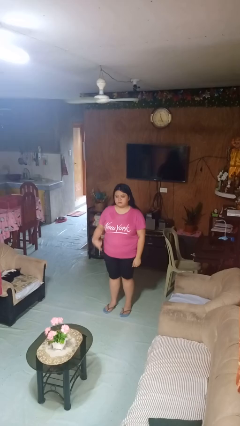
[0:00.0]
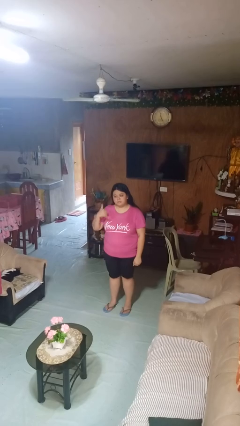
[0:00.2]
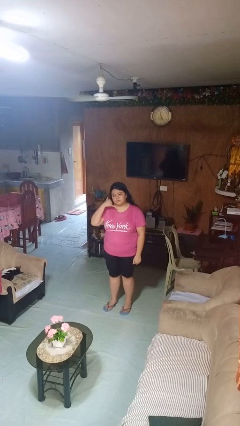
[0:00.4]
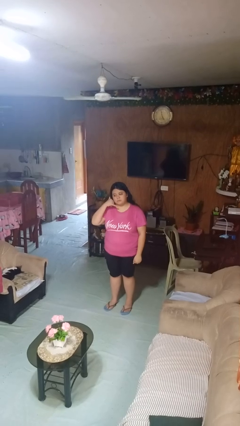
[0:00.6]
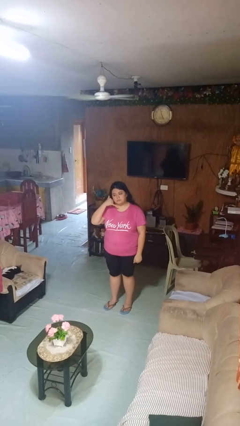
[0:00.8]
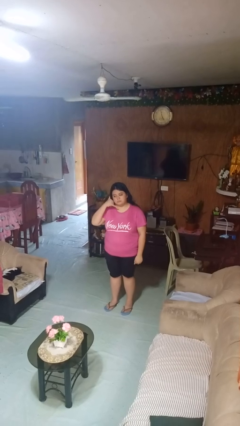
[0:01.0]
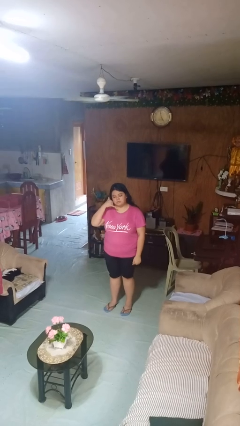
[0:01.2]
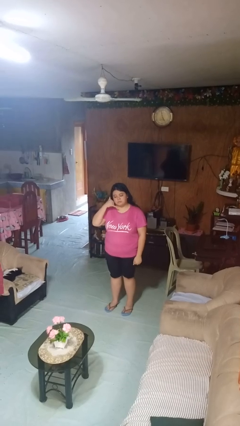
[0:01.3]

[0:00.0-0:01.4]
person gestures call me

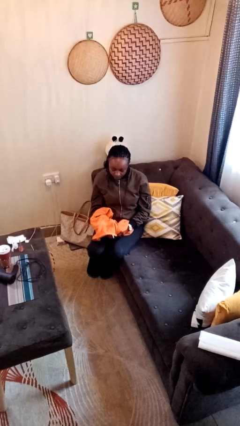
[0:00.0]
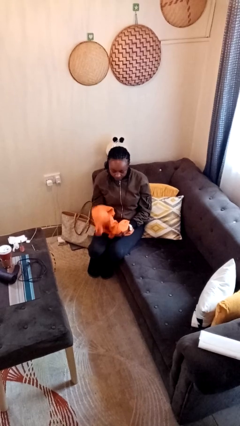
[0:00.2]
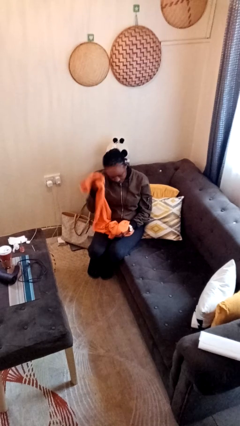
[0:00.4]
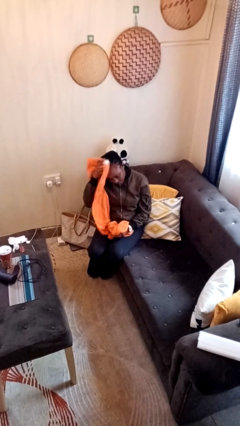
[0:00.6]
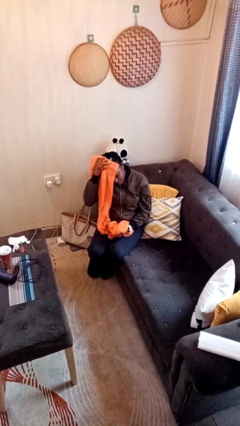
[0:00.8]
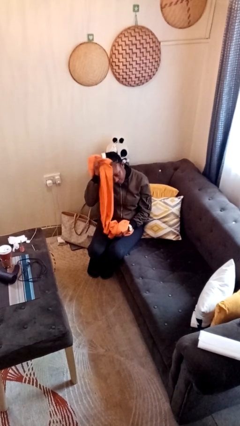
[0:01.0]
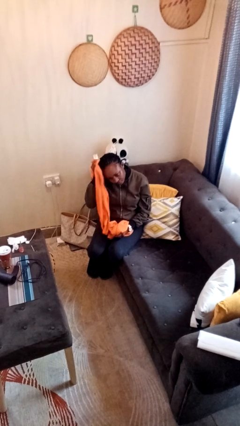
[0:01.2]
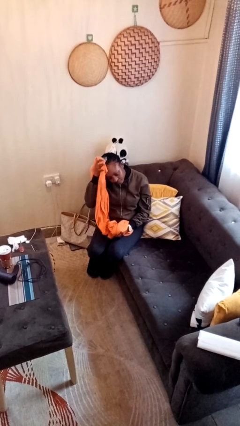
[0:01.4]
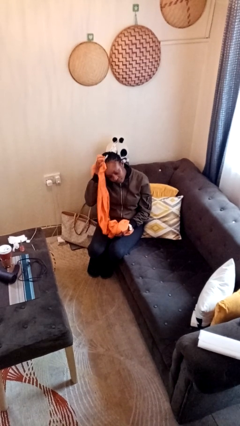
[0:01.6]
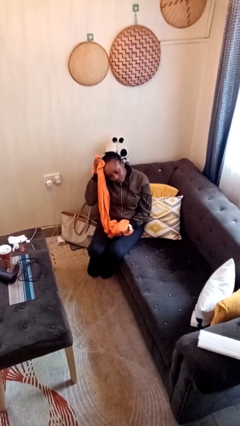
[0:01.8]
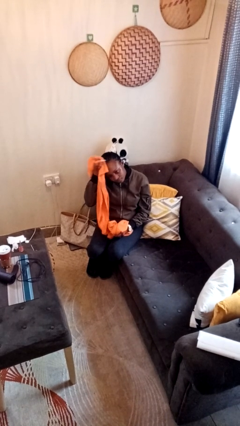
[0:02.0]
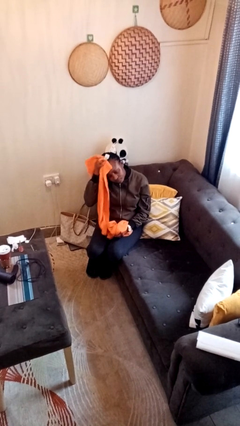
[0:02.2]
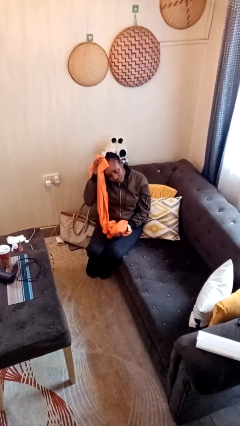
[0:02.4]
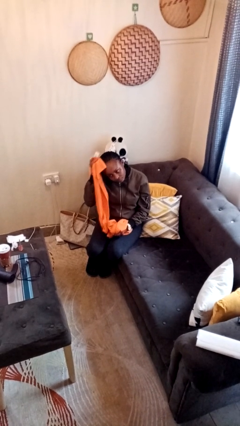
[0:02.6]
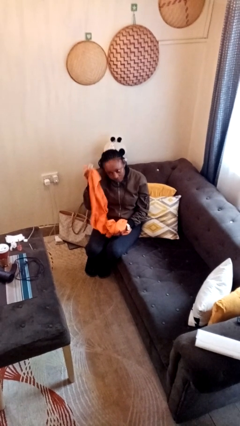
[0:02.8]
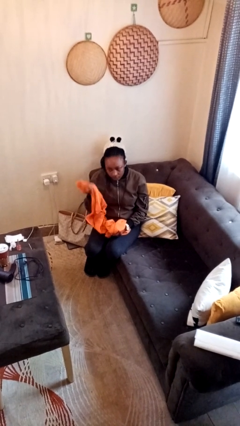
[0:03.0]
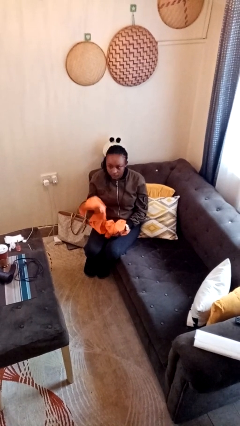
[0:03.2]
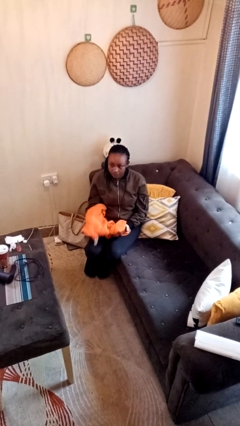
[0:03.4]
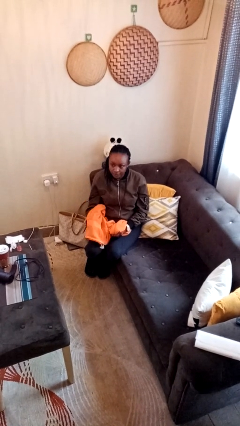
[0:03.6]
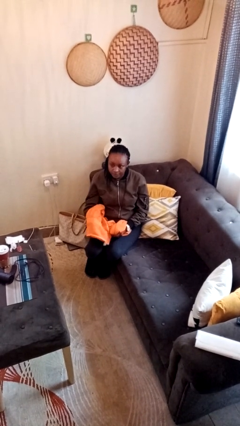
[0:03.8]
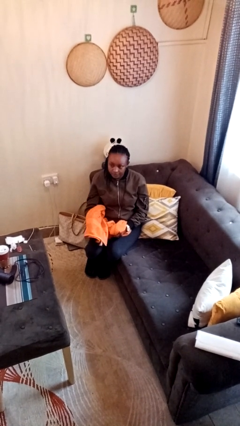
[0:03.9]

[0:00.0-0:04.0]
person dries hair with towel

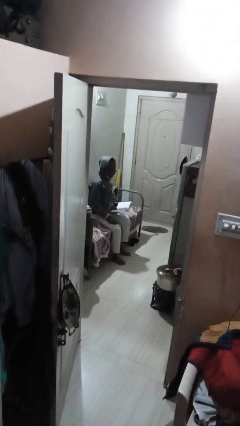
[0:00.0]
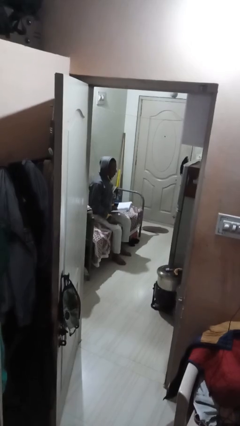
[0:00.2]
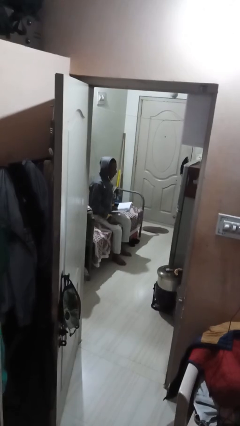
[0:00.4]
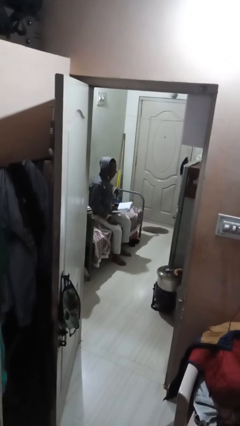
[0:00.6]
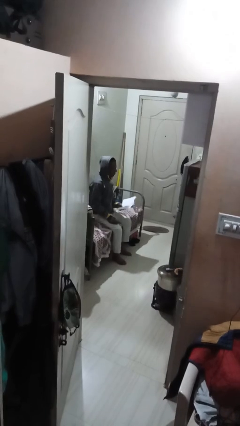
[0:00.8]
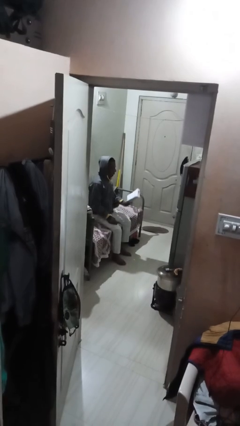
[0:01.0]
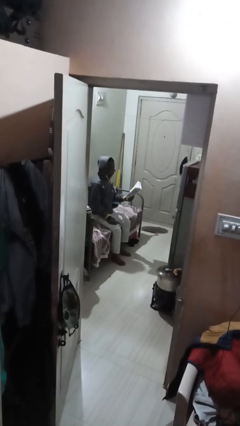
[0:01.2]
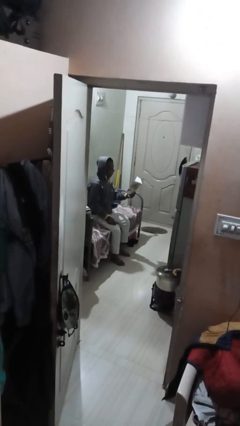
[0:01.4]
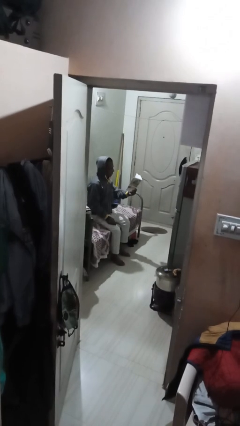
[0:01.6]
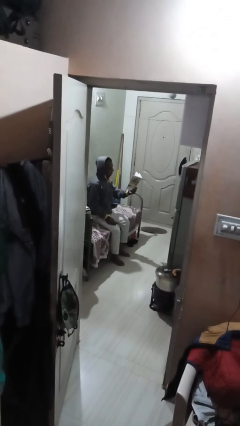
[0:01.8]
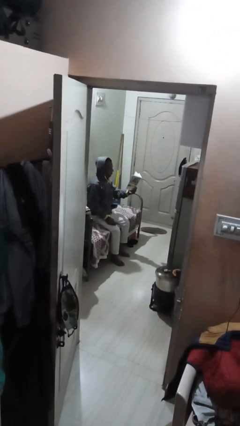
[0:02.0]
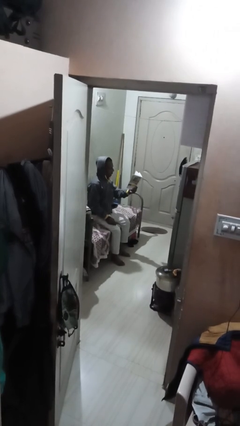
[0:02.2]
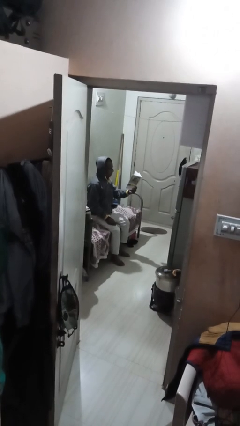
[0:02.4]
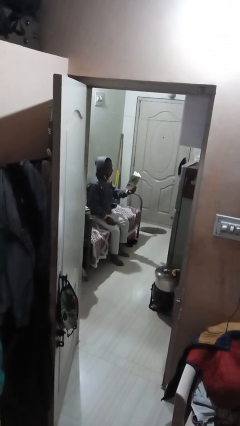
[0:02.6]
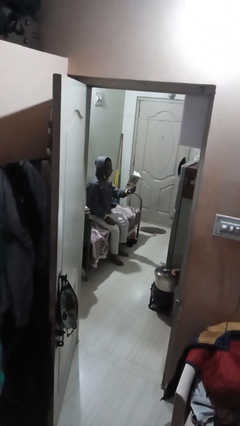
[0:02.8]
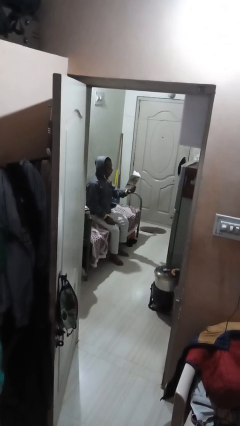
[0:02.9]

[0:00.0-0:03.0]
person reads document

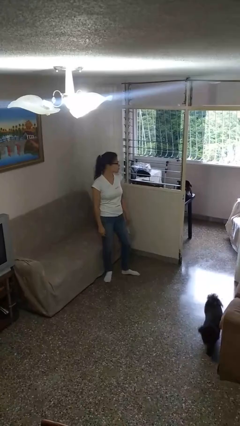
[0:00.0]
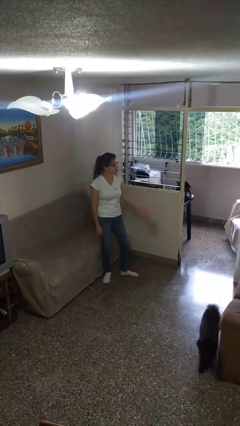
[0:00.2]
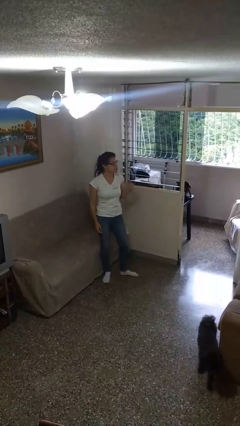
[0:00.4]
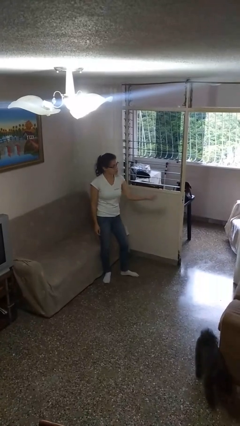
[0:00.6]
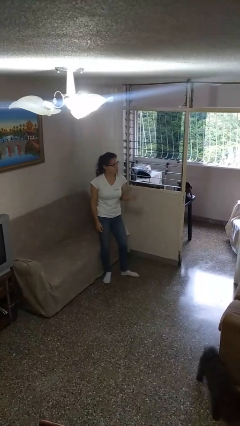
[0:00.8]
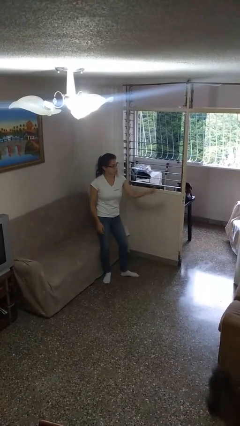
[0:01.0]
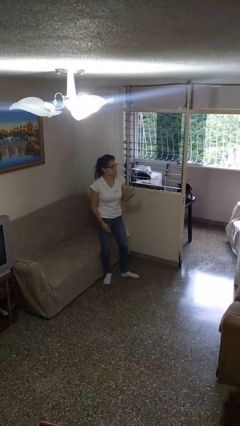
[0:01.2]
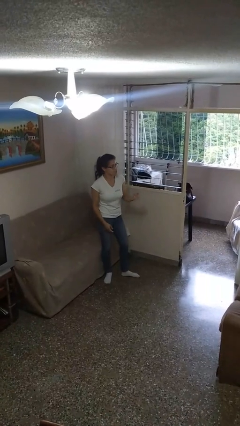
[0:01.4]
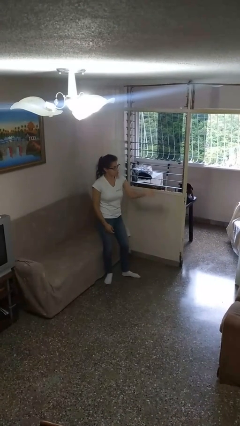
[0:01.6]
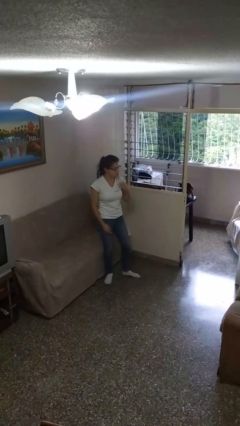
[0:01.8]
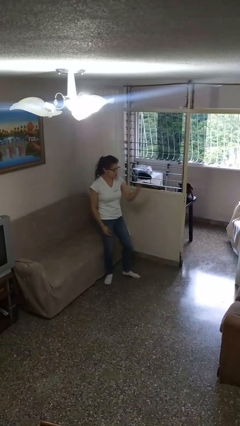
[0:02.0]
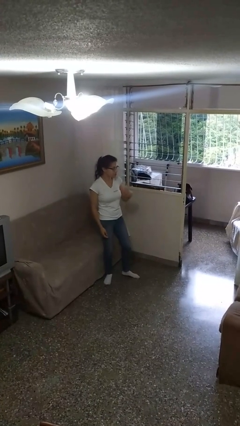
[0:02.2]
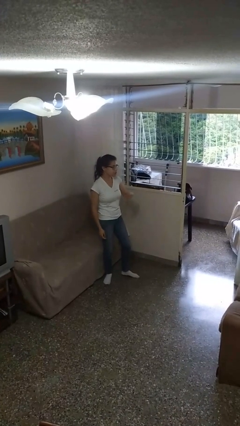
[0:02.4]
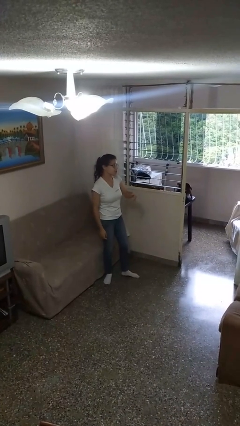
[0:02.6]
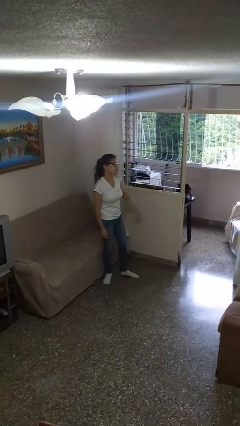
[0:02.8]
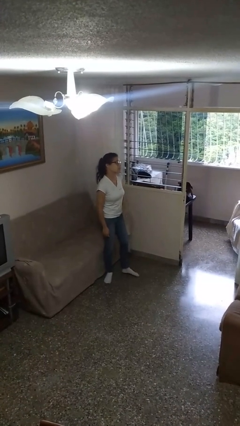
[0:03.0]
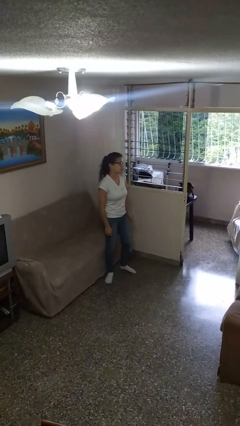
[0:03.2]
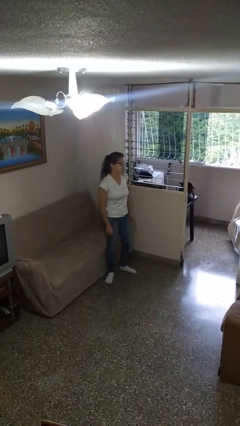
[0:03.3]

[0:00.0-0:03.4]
person gestures come here

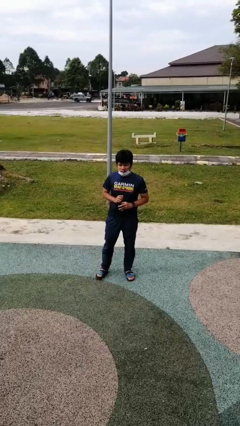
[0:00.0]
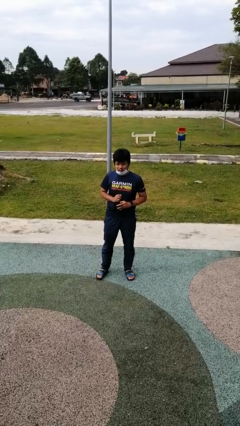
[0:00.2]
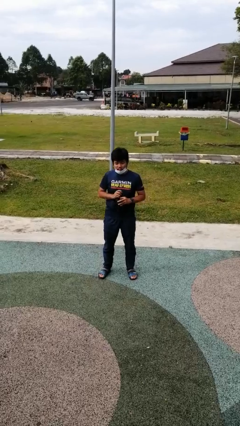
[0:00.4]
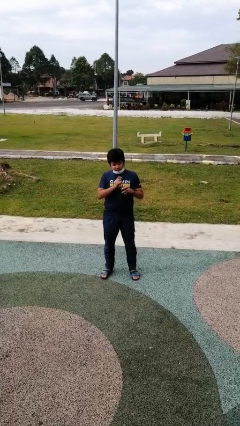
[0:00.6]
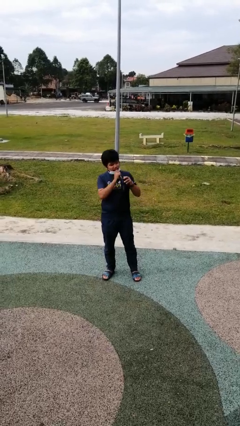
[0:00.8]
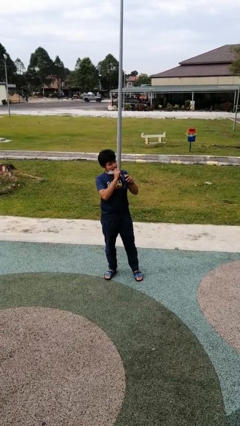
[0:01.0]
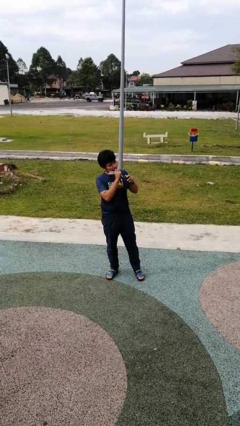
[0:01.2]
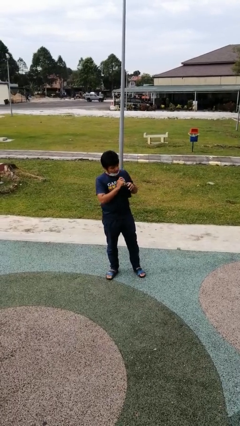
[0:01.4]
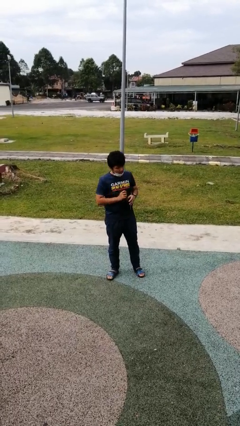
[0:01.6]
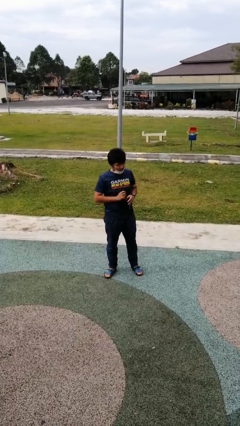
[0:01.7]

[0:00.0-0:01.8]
person drinks from straw

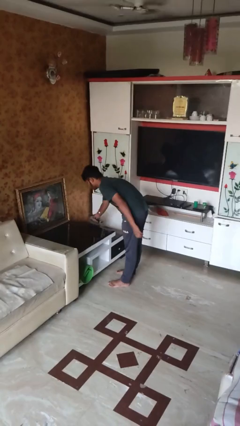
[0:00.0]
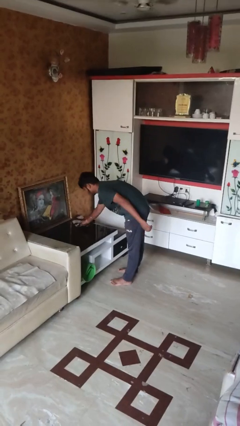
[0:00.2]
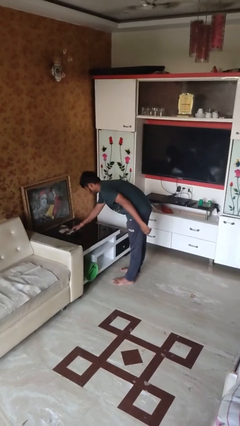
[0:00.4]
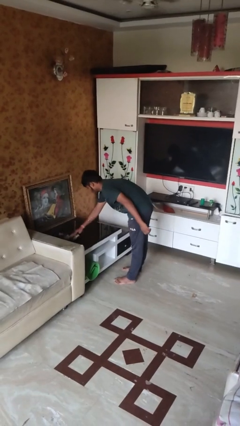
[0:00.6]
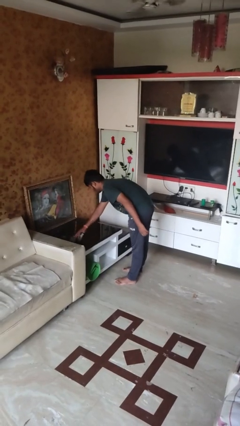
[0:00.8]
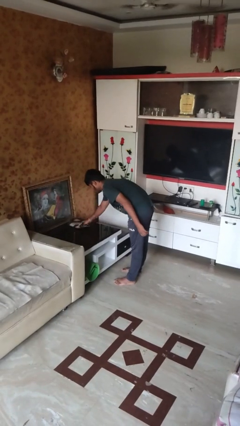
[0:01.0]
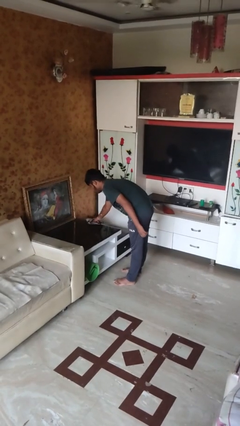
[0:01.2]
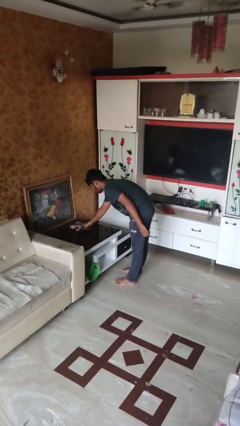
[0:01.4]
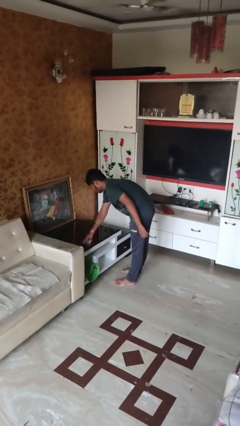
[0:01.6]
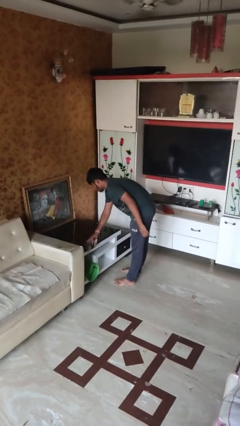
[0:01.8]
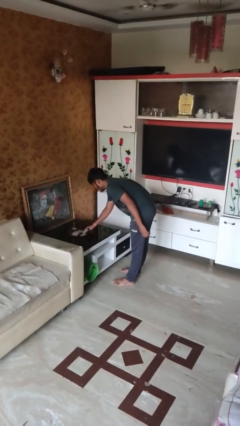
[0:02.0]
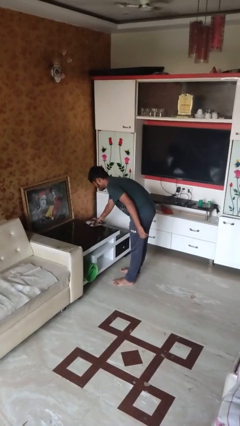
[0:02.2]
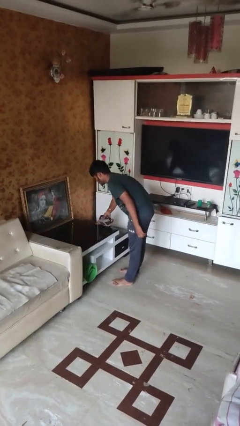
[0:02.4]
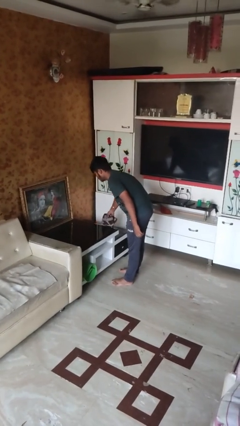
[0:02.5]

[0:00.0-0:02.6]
person cleans table with rag

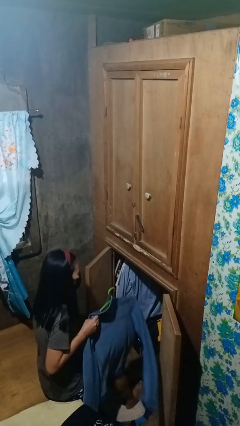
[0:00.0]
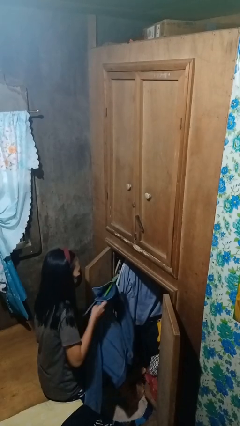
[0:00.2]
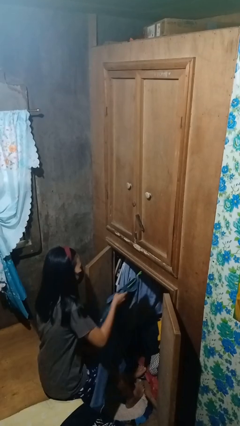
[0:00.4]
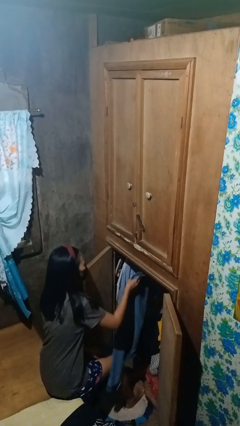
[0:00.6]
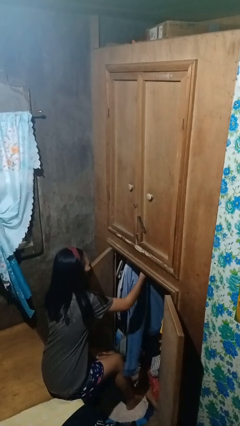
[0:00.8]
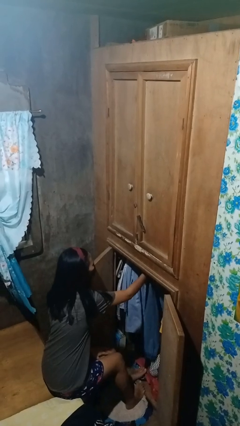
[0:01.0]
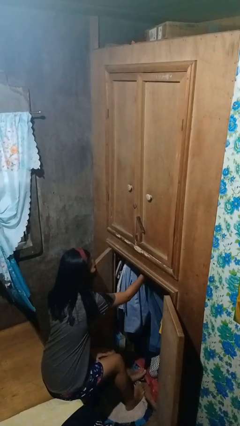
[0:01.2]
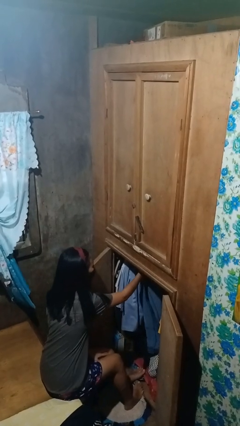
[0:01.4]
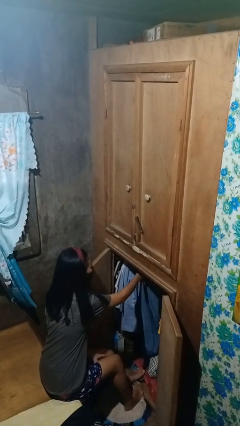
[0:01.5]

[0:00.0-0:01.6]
person puts clothes into closet
